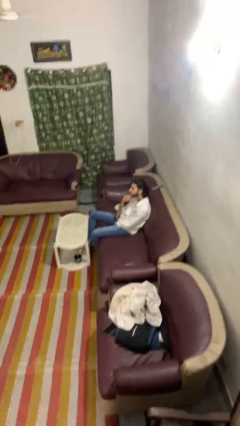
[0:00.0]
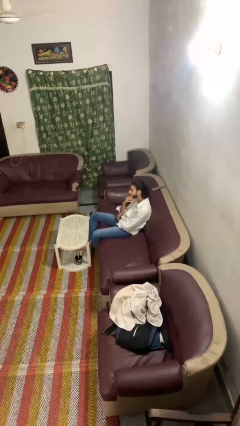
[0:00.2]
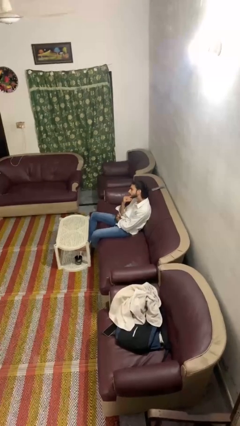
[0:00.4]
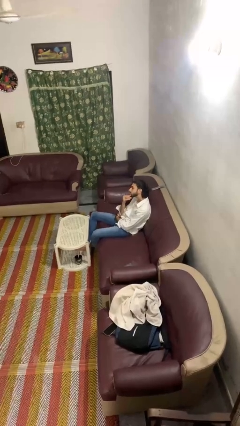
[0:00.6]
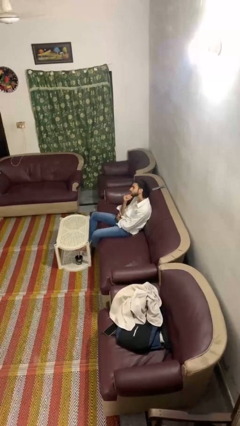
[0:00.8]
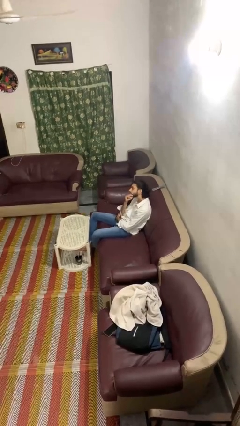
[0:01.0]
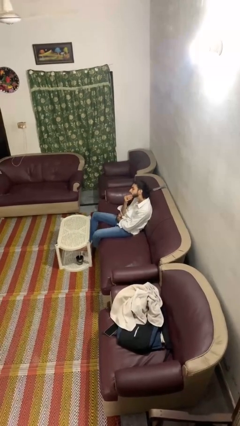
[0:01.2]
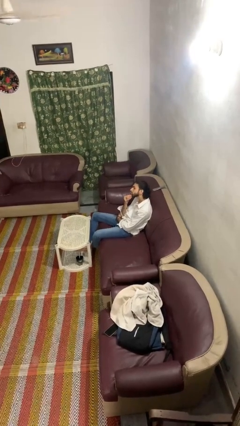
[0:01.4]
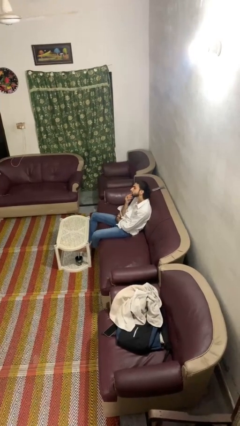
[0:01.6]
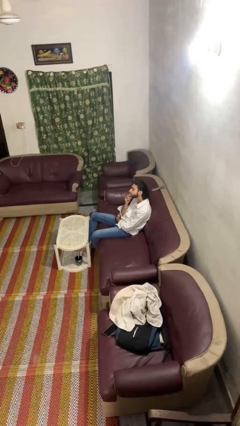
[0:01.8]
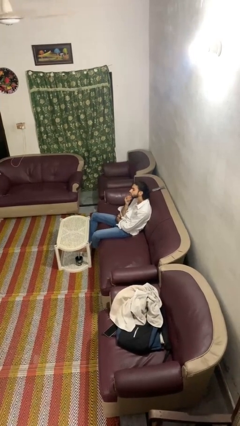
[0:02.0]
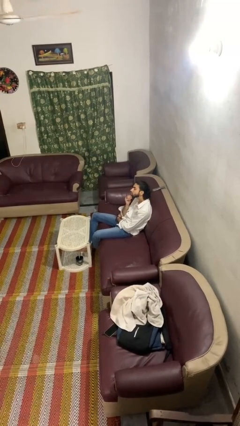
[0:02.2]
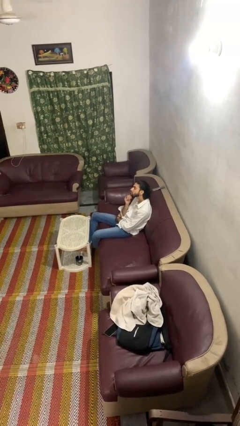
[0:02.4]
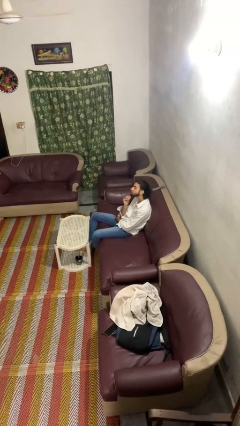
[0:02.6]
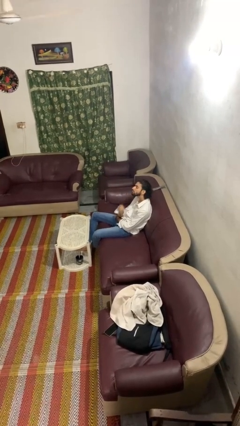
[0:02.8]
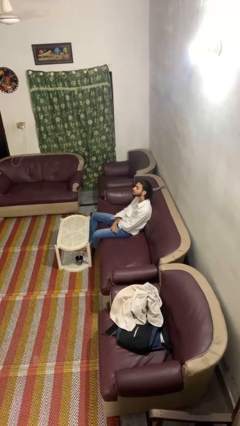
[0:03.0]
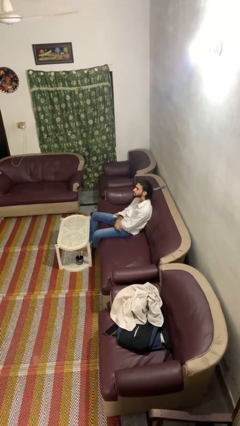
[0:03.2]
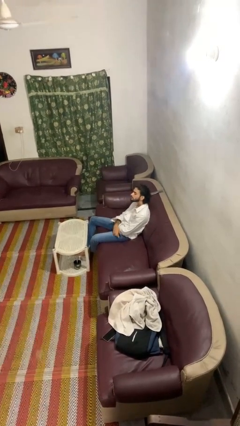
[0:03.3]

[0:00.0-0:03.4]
person strokes chin

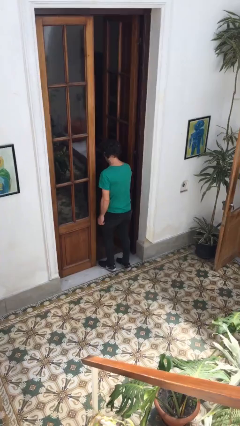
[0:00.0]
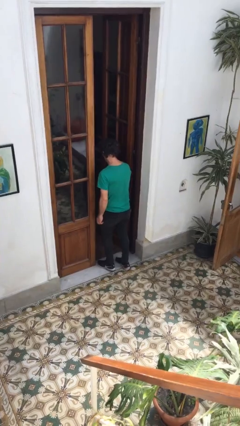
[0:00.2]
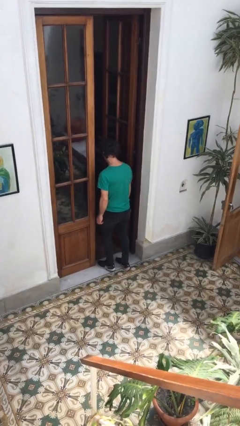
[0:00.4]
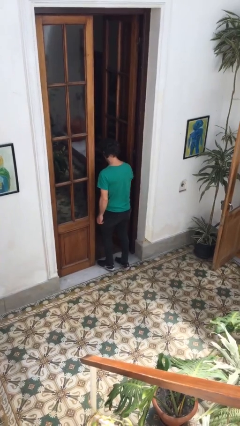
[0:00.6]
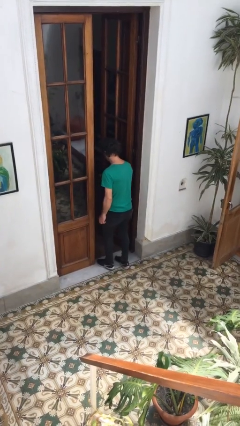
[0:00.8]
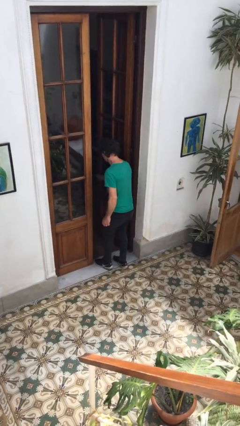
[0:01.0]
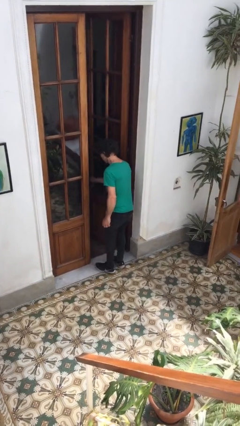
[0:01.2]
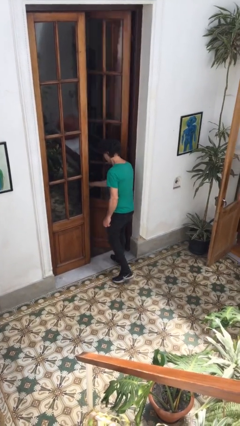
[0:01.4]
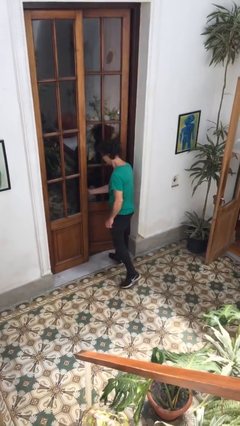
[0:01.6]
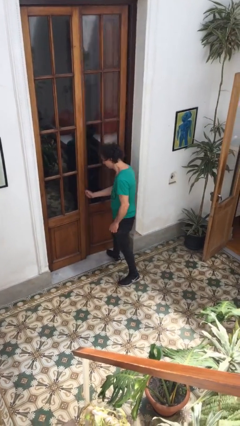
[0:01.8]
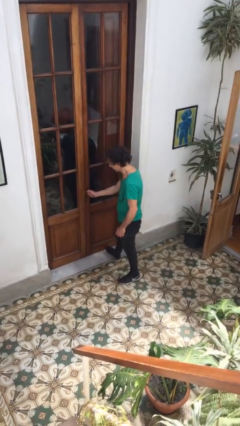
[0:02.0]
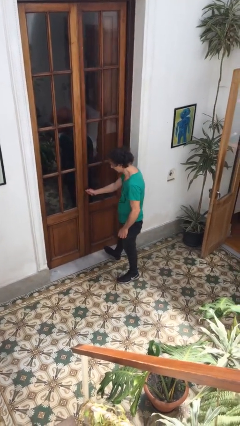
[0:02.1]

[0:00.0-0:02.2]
person closes facility door

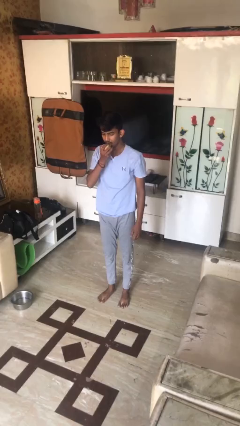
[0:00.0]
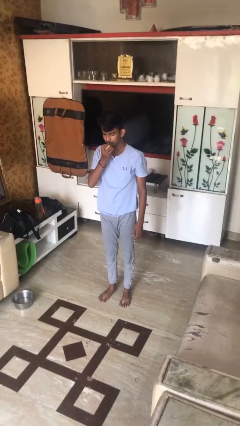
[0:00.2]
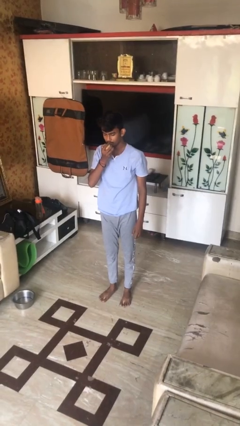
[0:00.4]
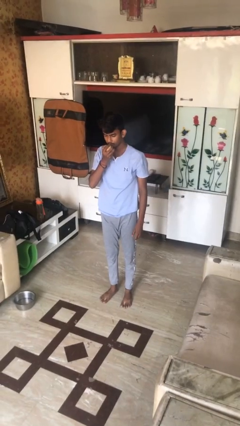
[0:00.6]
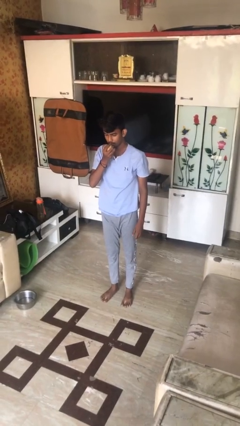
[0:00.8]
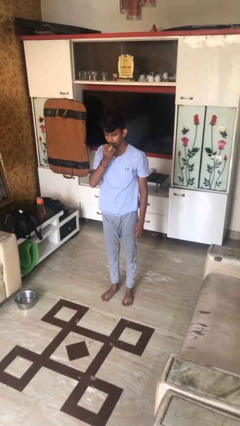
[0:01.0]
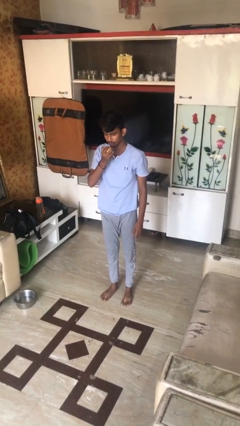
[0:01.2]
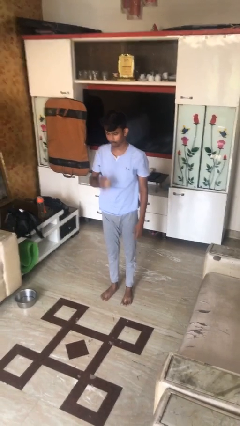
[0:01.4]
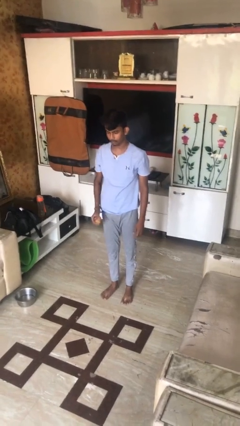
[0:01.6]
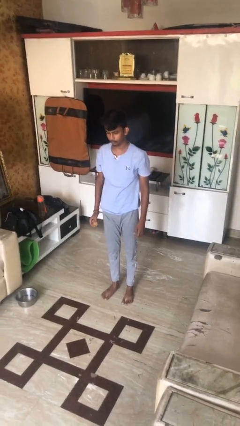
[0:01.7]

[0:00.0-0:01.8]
person eats apple

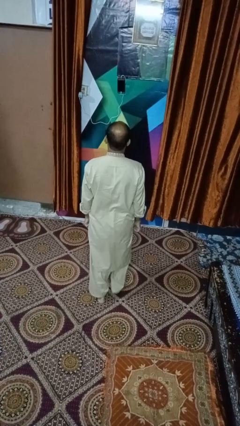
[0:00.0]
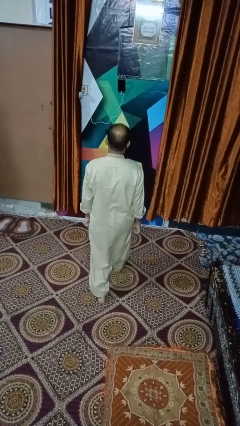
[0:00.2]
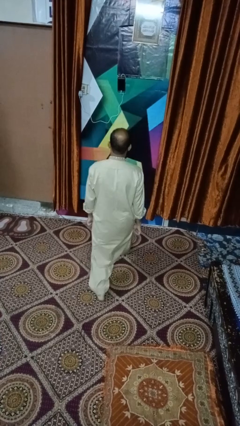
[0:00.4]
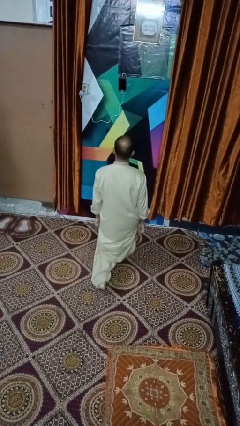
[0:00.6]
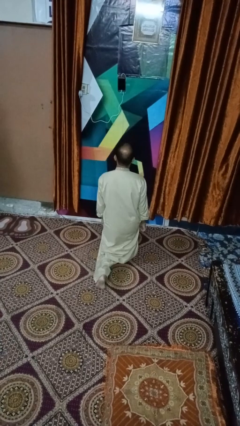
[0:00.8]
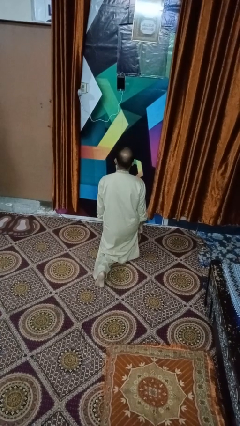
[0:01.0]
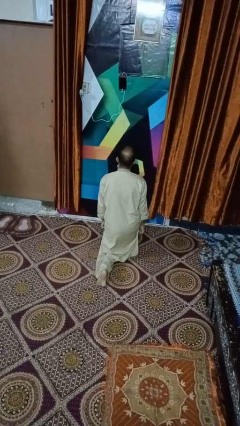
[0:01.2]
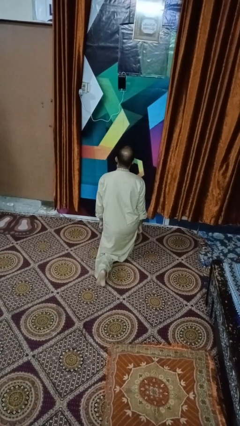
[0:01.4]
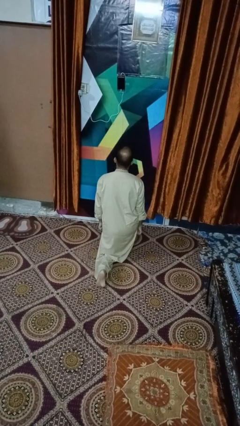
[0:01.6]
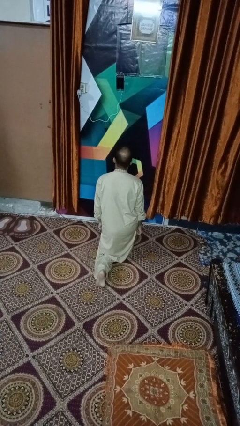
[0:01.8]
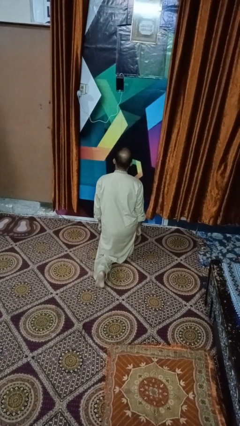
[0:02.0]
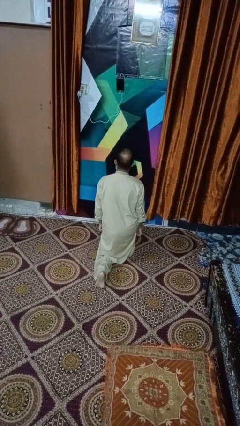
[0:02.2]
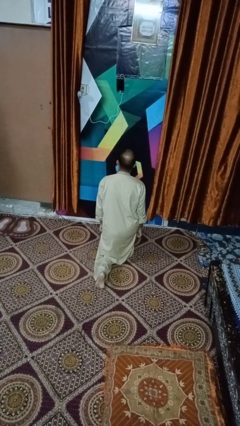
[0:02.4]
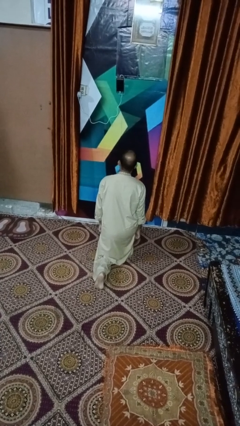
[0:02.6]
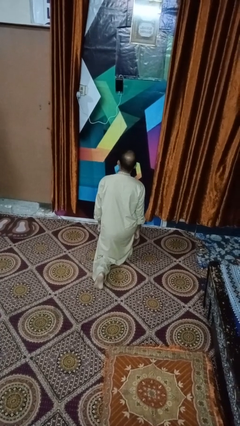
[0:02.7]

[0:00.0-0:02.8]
person exercises with lunges

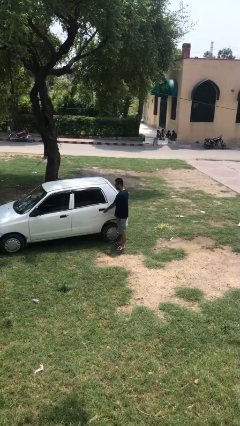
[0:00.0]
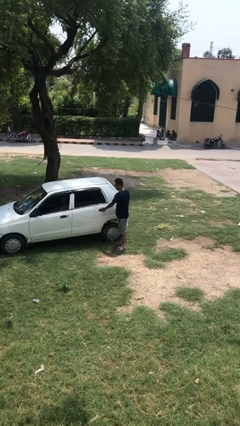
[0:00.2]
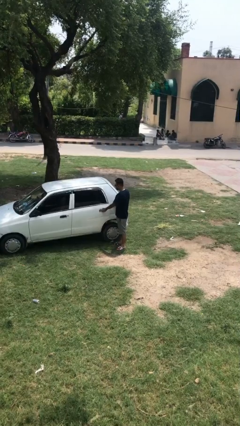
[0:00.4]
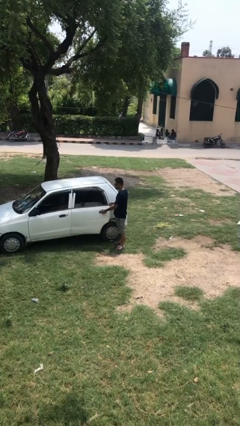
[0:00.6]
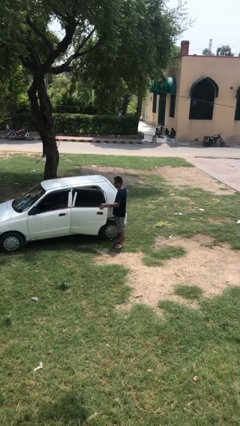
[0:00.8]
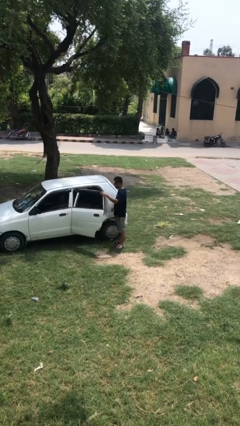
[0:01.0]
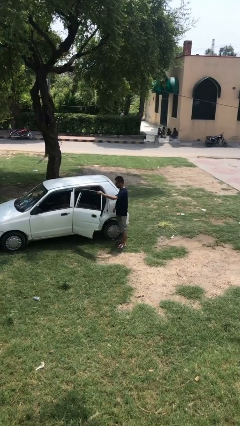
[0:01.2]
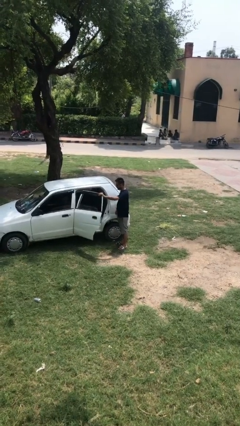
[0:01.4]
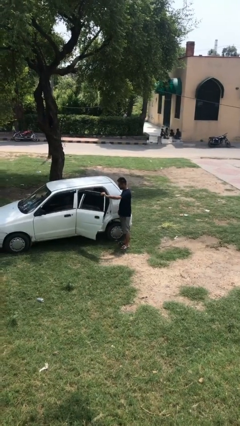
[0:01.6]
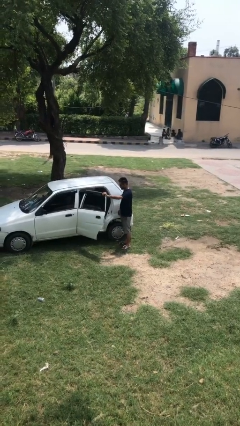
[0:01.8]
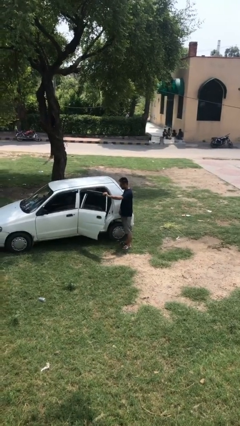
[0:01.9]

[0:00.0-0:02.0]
person opens car door

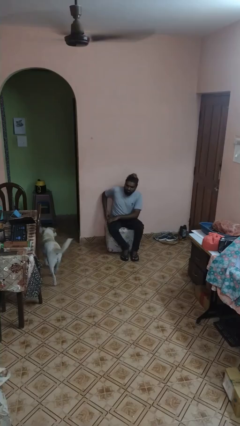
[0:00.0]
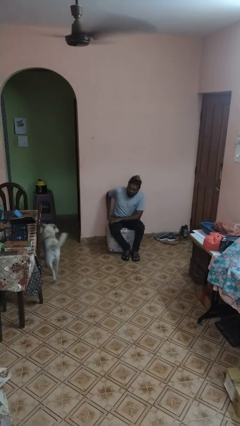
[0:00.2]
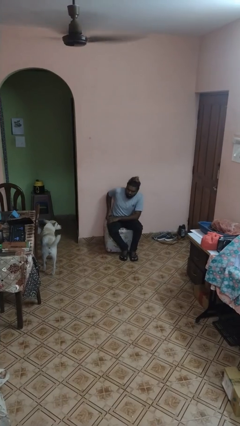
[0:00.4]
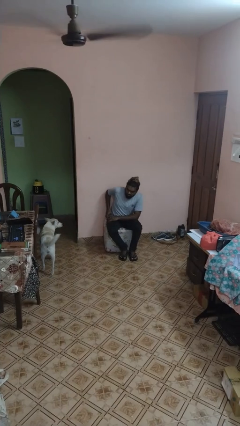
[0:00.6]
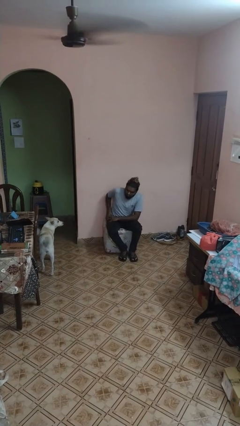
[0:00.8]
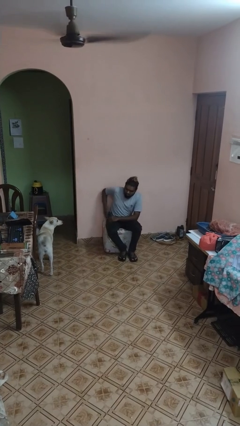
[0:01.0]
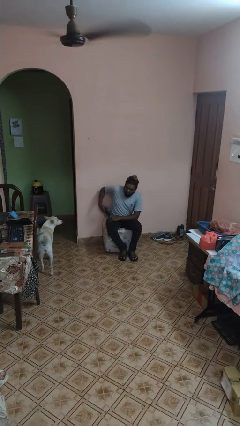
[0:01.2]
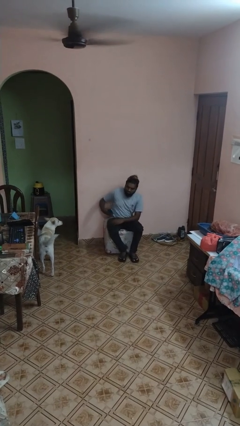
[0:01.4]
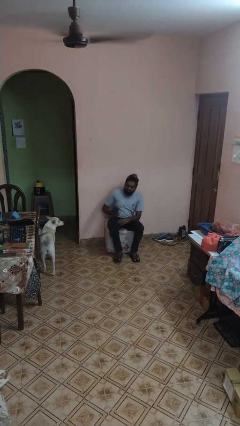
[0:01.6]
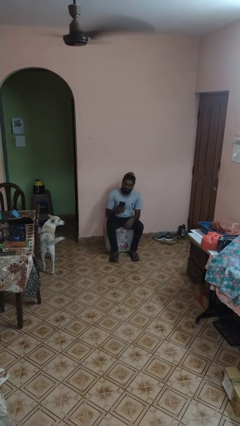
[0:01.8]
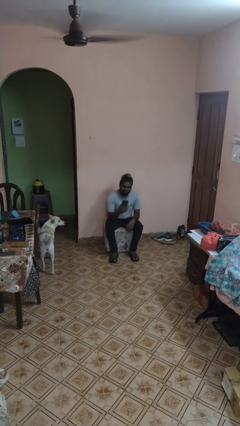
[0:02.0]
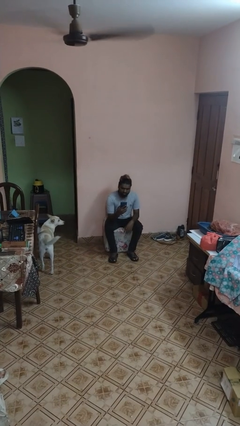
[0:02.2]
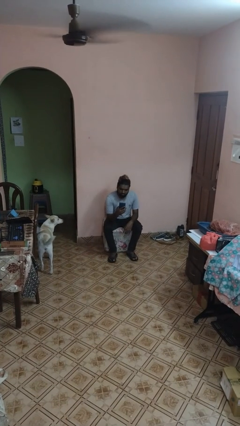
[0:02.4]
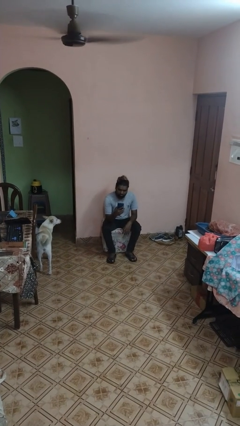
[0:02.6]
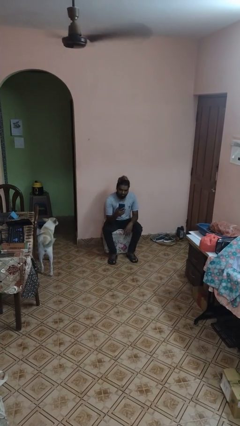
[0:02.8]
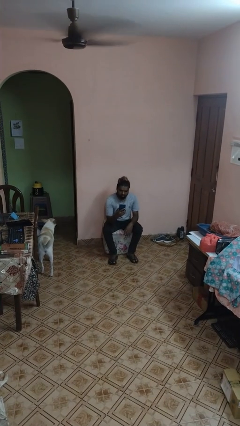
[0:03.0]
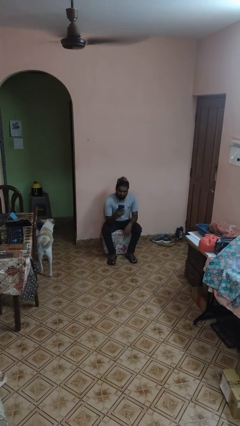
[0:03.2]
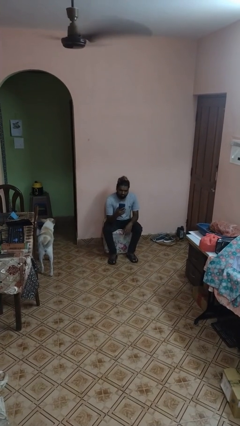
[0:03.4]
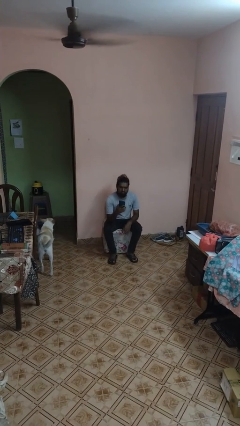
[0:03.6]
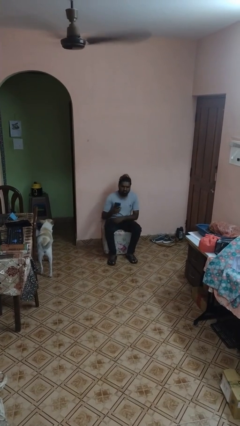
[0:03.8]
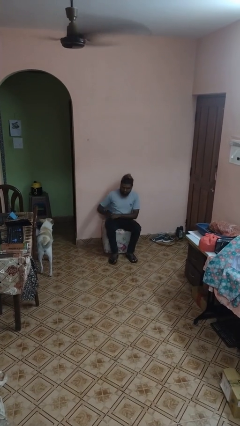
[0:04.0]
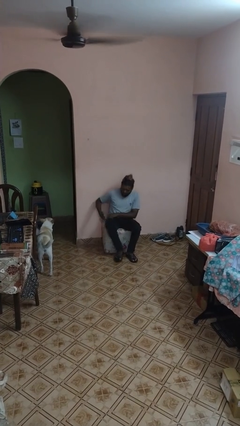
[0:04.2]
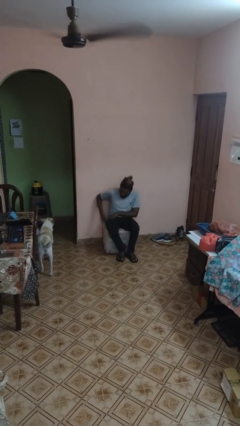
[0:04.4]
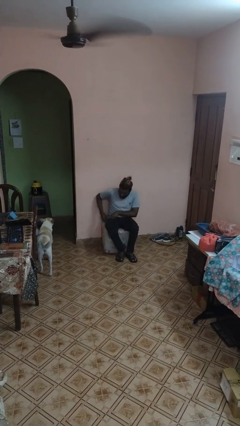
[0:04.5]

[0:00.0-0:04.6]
person takes phone from pocket

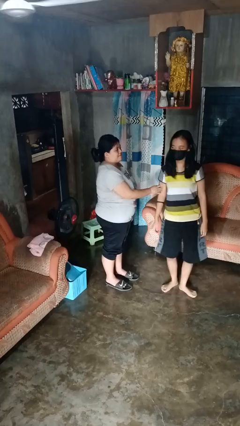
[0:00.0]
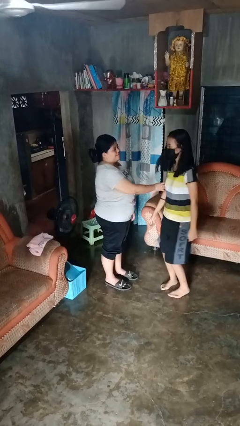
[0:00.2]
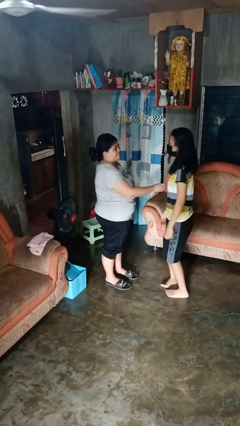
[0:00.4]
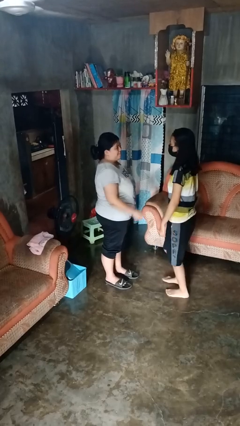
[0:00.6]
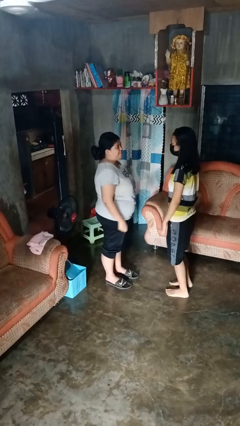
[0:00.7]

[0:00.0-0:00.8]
person spins person around
